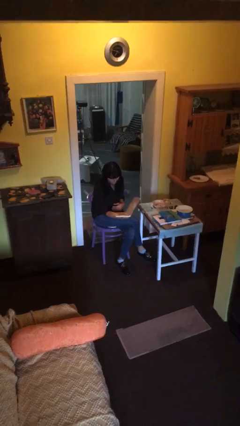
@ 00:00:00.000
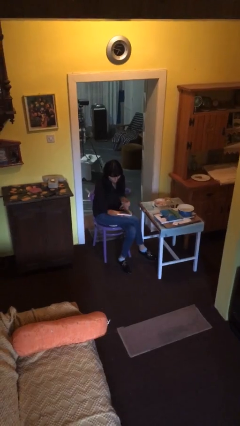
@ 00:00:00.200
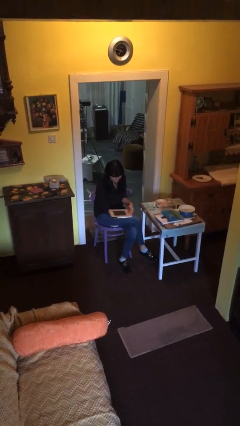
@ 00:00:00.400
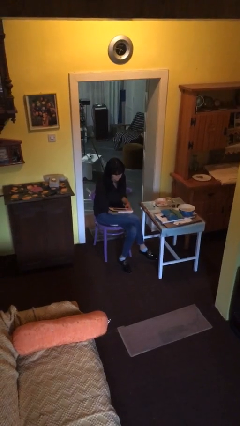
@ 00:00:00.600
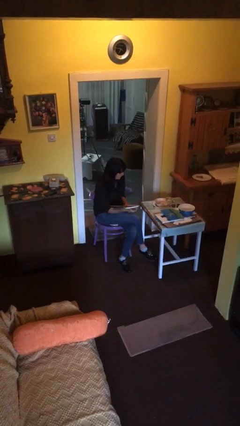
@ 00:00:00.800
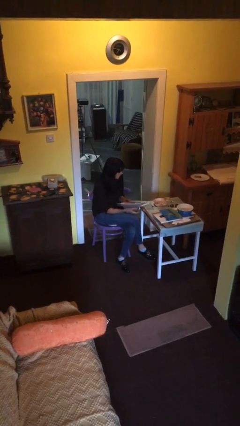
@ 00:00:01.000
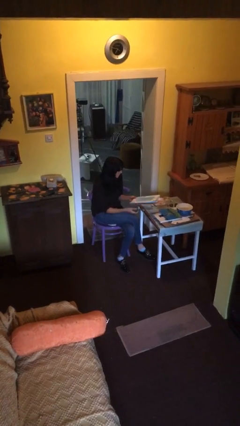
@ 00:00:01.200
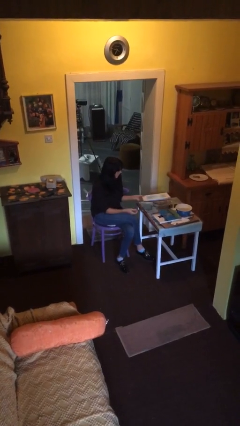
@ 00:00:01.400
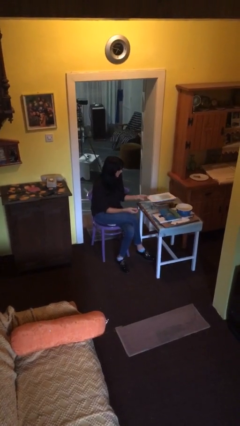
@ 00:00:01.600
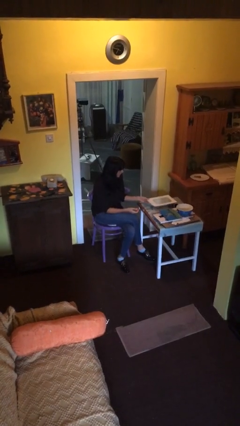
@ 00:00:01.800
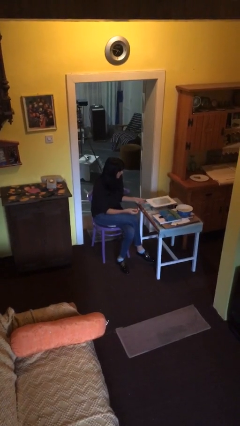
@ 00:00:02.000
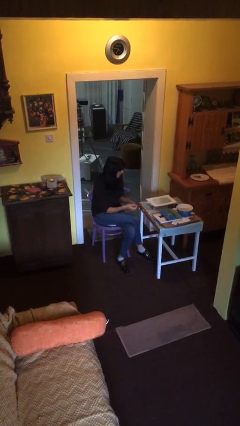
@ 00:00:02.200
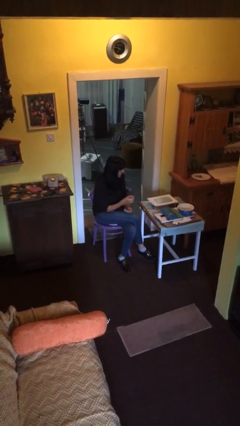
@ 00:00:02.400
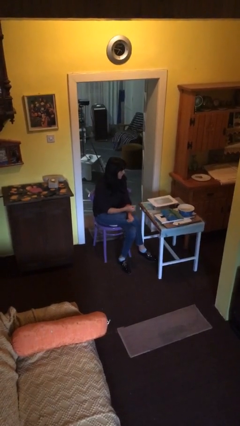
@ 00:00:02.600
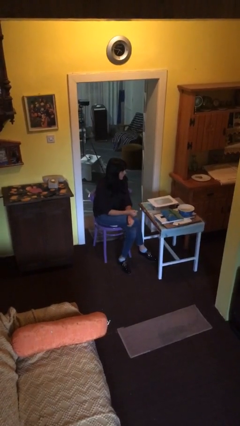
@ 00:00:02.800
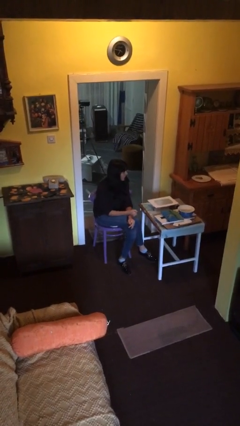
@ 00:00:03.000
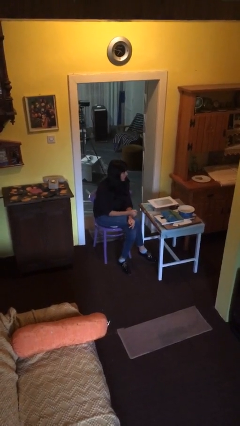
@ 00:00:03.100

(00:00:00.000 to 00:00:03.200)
person puts down object on table

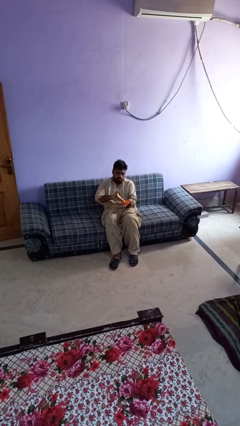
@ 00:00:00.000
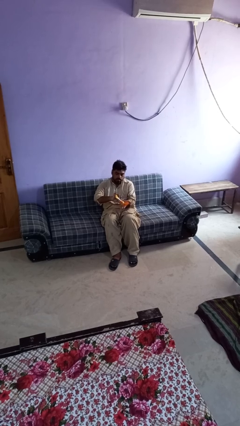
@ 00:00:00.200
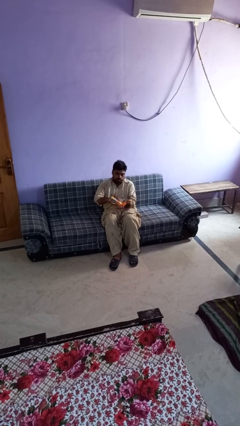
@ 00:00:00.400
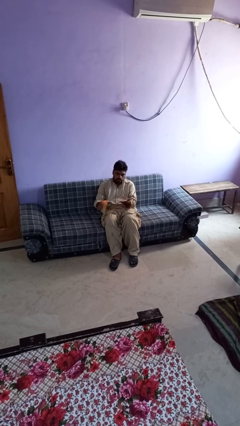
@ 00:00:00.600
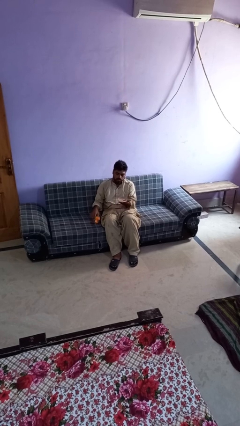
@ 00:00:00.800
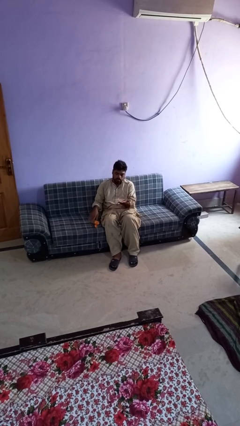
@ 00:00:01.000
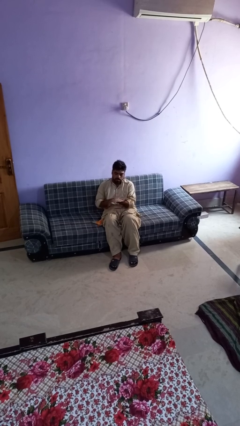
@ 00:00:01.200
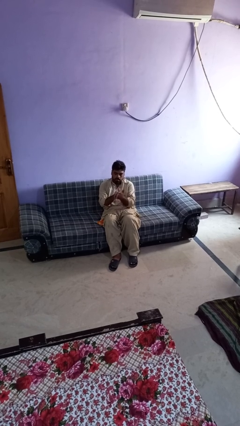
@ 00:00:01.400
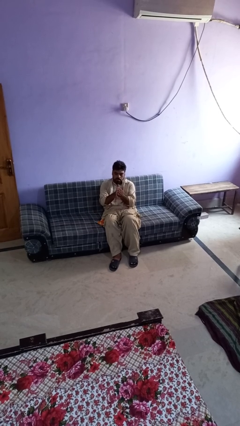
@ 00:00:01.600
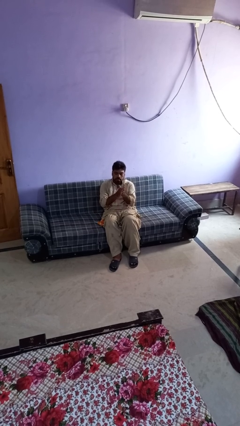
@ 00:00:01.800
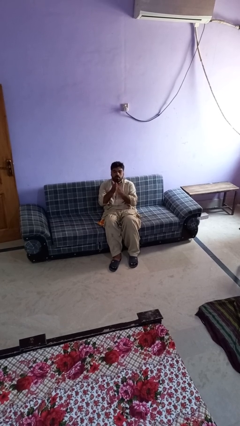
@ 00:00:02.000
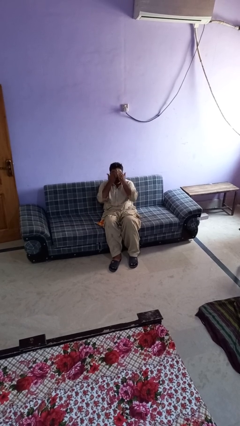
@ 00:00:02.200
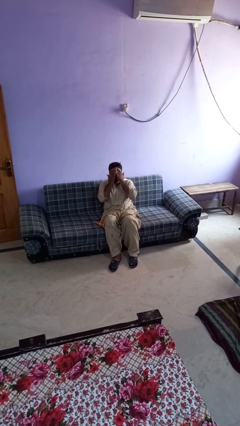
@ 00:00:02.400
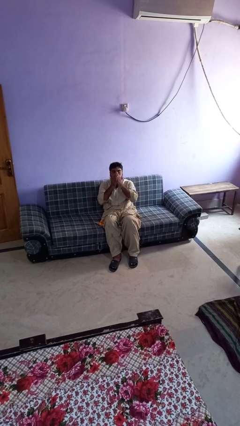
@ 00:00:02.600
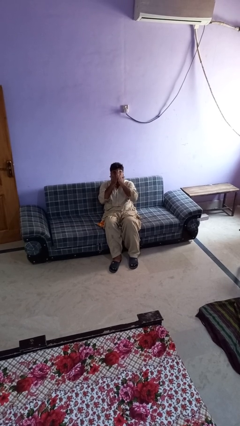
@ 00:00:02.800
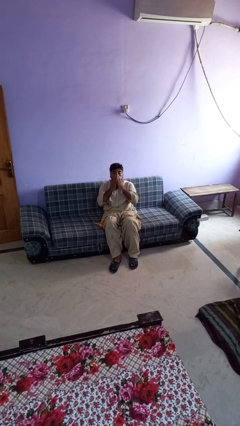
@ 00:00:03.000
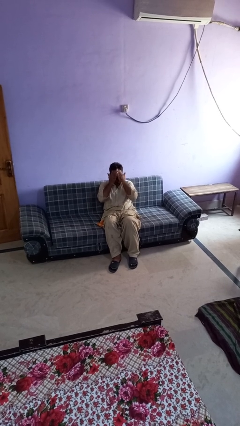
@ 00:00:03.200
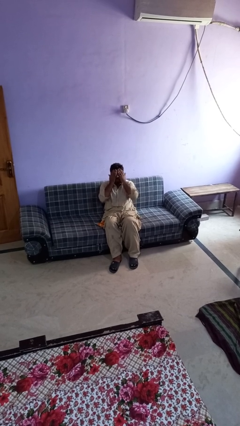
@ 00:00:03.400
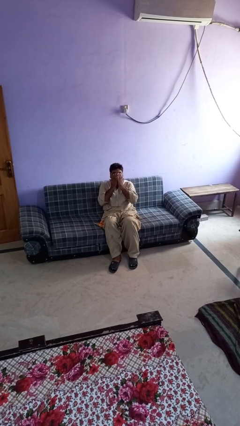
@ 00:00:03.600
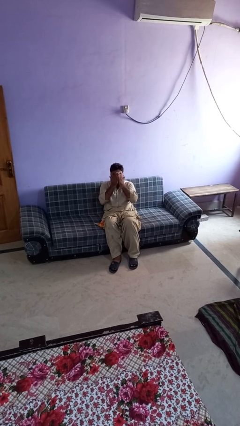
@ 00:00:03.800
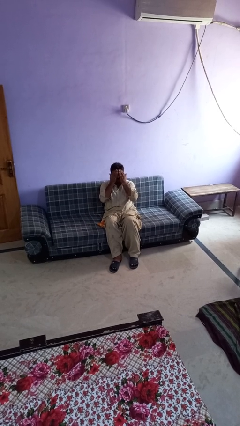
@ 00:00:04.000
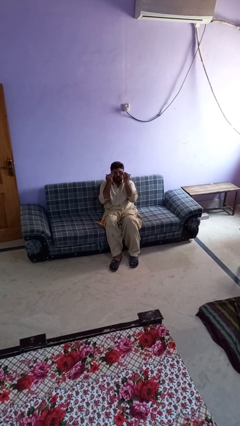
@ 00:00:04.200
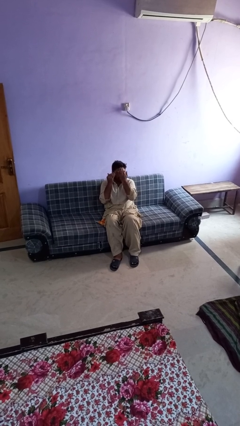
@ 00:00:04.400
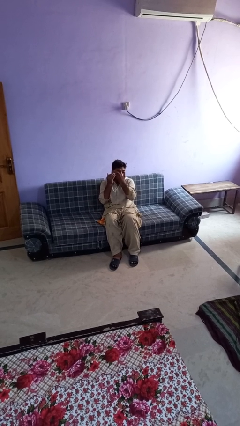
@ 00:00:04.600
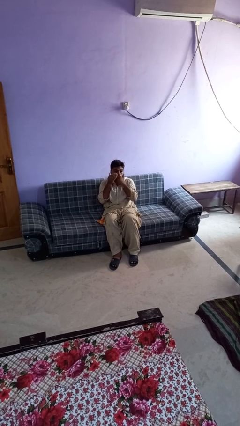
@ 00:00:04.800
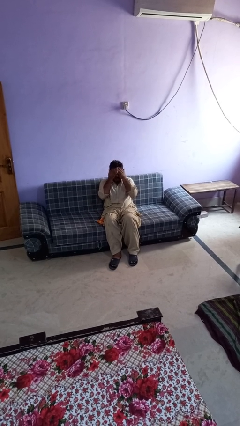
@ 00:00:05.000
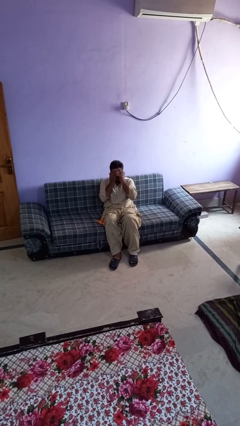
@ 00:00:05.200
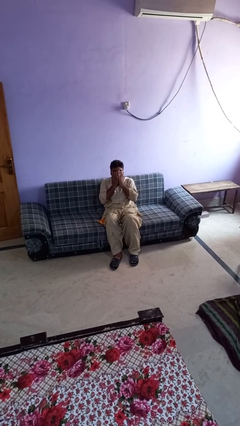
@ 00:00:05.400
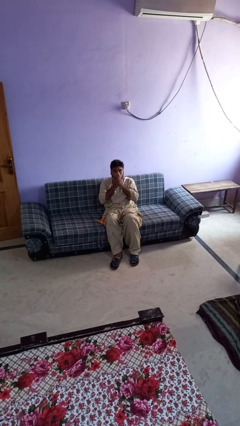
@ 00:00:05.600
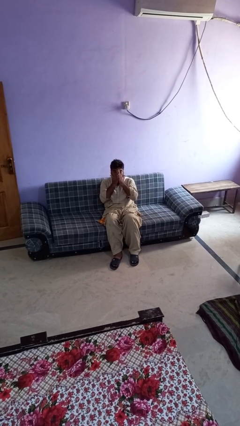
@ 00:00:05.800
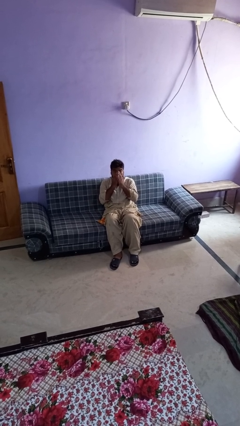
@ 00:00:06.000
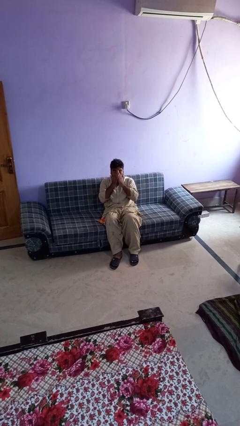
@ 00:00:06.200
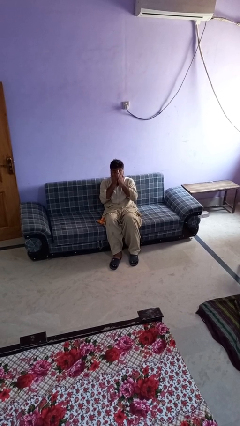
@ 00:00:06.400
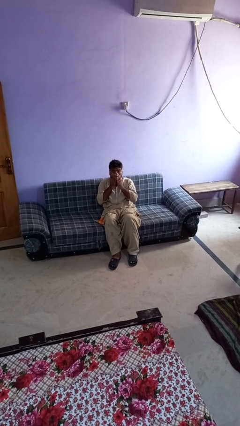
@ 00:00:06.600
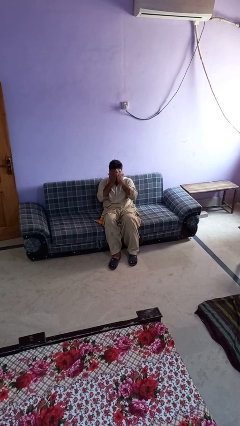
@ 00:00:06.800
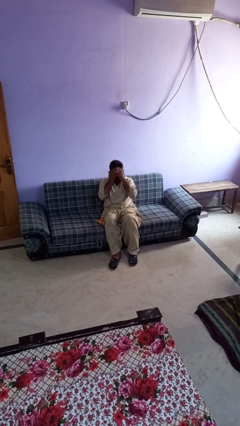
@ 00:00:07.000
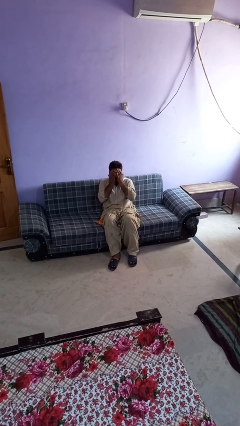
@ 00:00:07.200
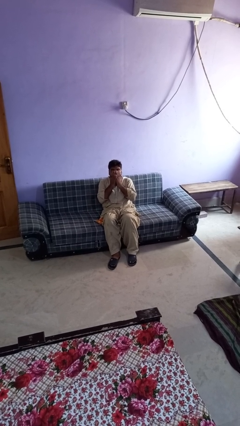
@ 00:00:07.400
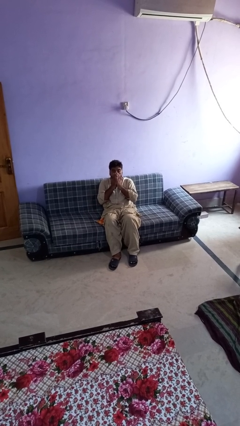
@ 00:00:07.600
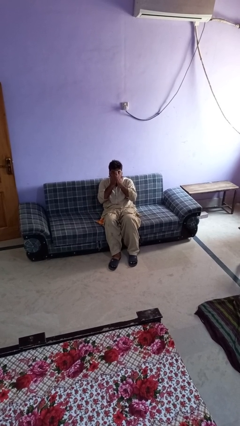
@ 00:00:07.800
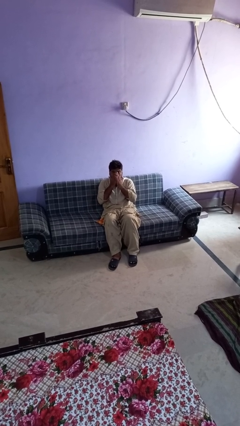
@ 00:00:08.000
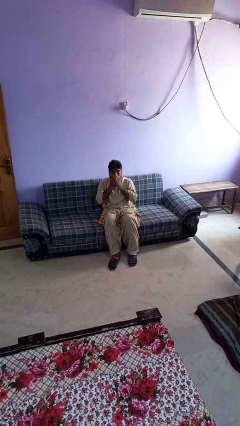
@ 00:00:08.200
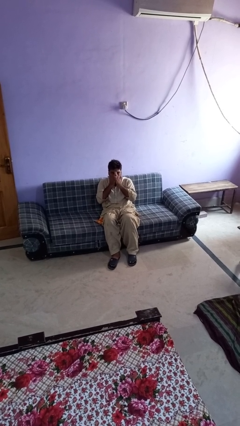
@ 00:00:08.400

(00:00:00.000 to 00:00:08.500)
person applies sunscreen

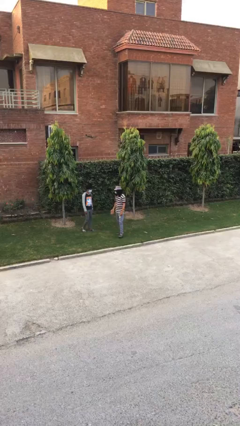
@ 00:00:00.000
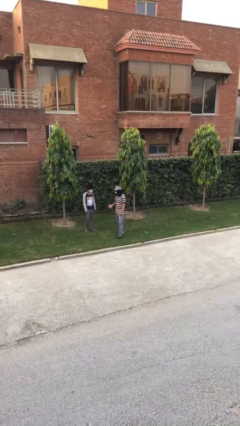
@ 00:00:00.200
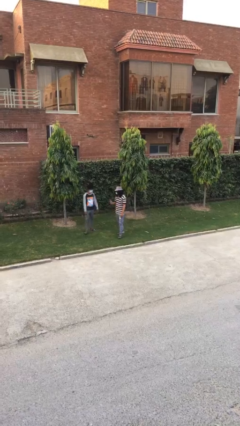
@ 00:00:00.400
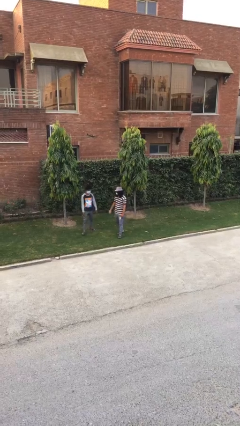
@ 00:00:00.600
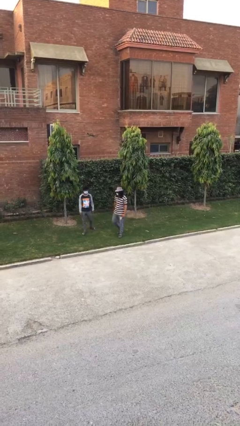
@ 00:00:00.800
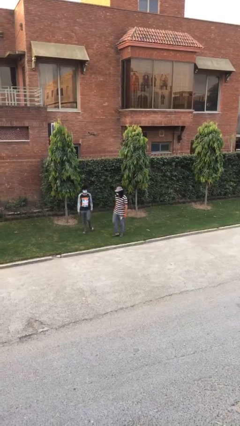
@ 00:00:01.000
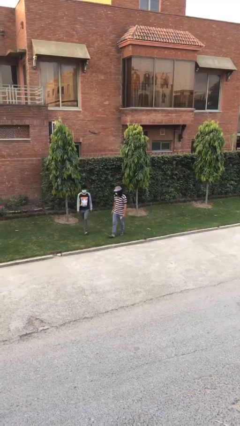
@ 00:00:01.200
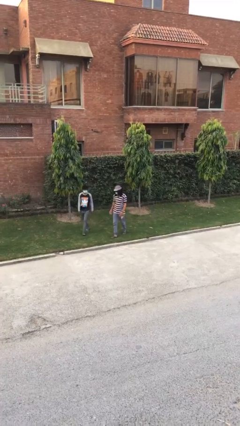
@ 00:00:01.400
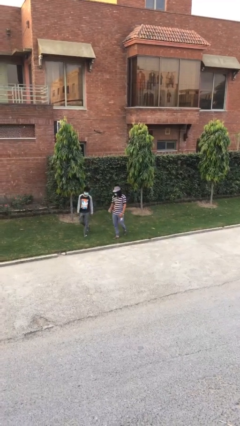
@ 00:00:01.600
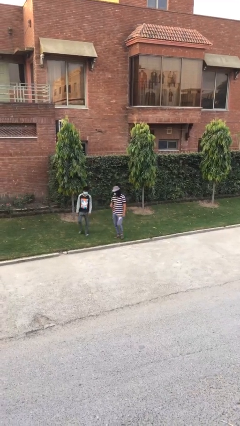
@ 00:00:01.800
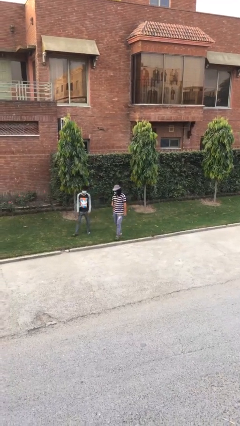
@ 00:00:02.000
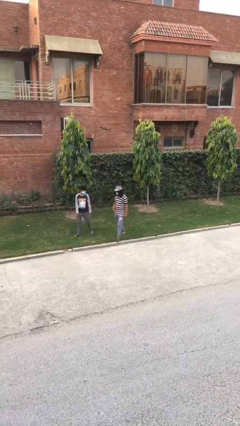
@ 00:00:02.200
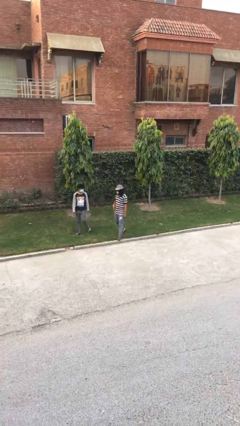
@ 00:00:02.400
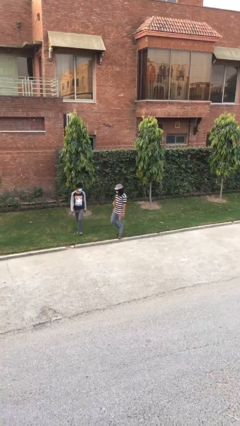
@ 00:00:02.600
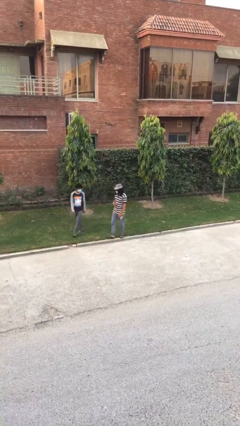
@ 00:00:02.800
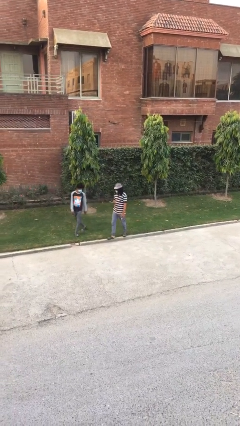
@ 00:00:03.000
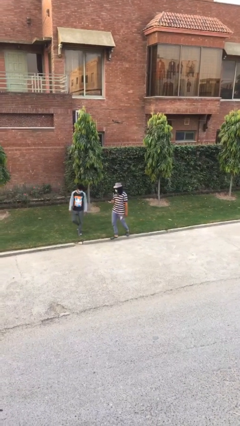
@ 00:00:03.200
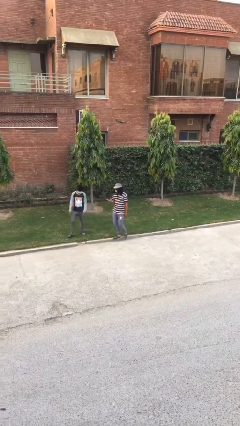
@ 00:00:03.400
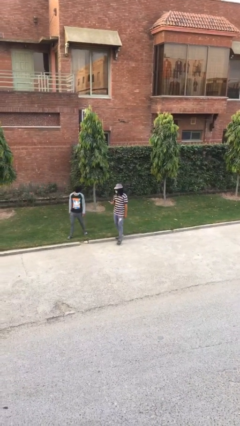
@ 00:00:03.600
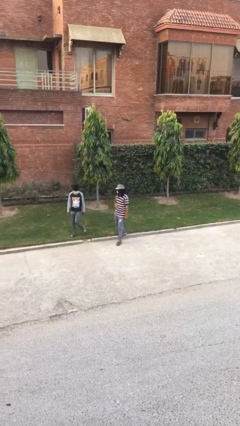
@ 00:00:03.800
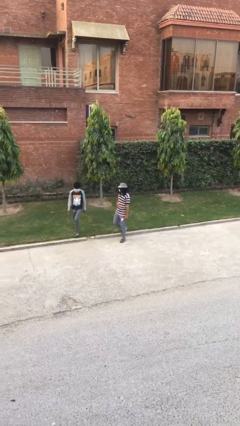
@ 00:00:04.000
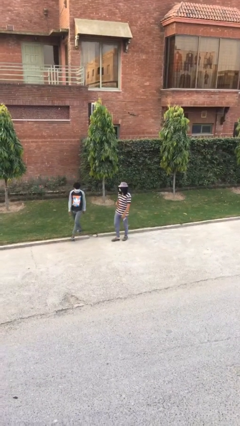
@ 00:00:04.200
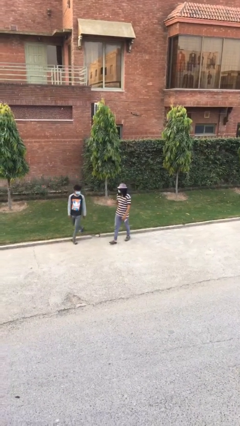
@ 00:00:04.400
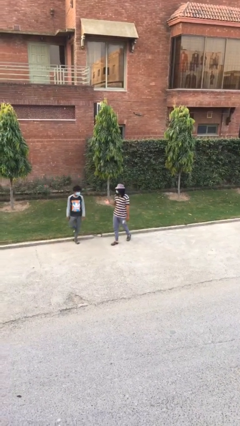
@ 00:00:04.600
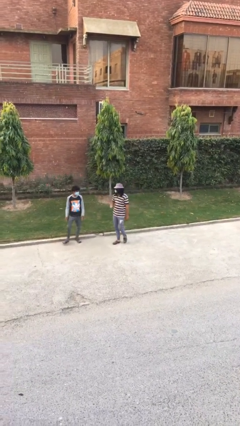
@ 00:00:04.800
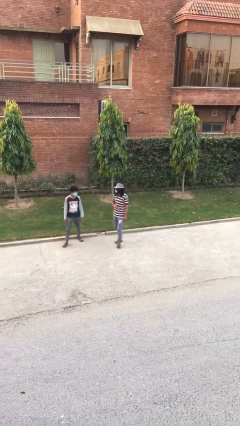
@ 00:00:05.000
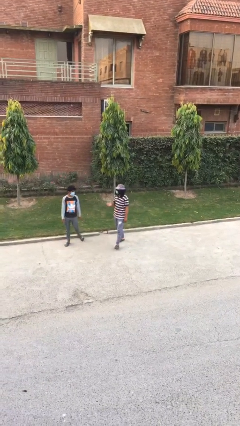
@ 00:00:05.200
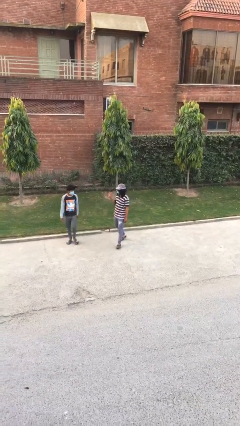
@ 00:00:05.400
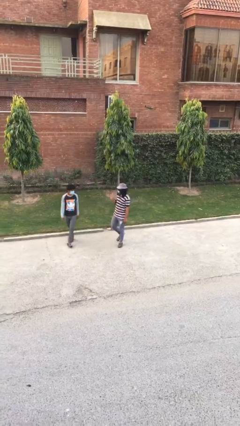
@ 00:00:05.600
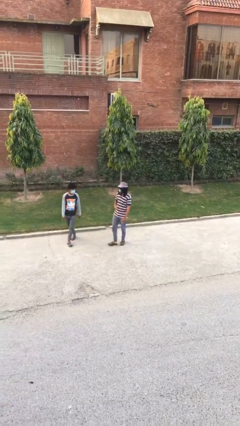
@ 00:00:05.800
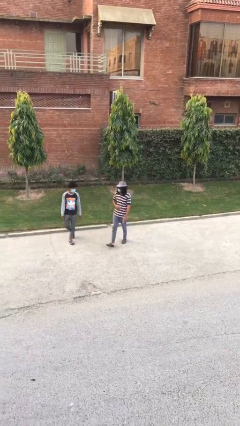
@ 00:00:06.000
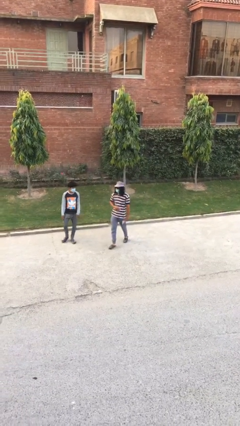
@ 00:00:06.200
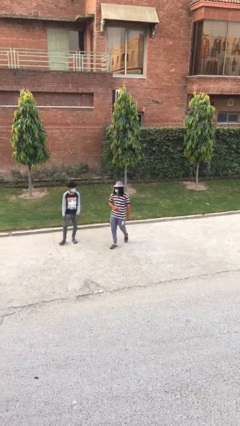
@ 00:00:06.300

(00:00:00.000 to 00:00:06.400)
person talks to person
